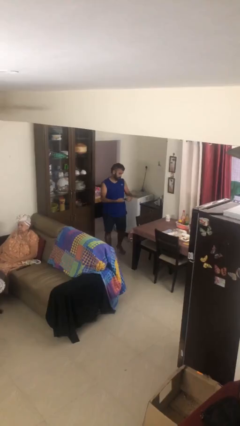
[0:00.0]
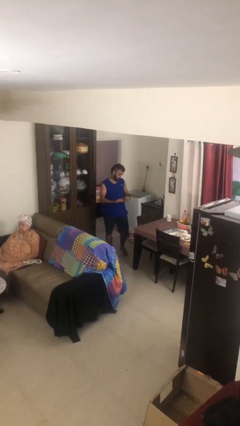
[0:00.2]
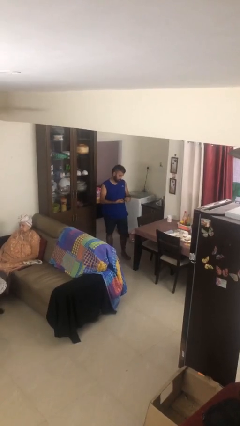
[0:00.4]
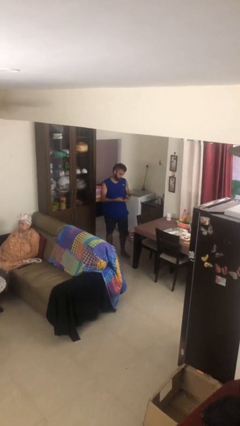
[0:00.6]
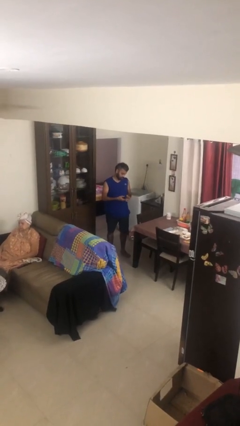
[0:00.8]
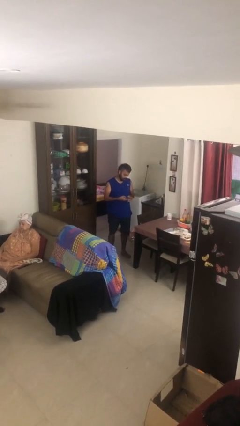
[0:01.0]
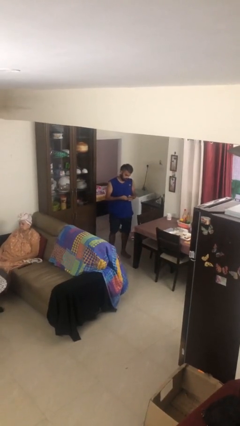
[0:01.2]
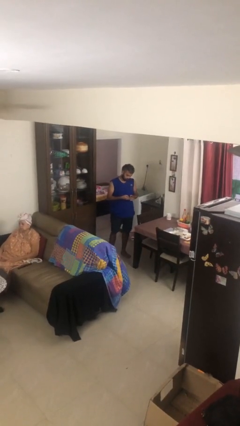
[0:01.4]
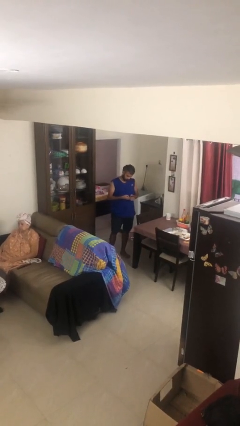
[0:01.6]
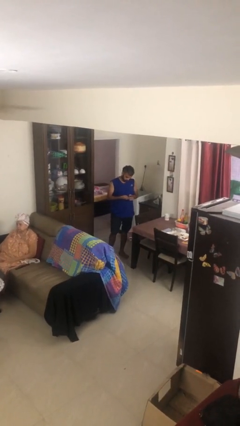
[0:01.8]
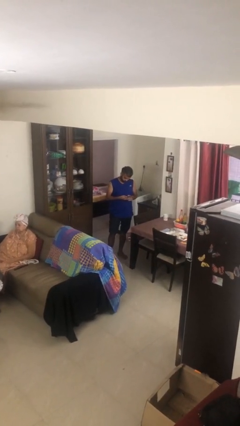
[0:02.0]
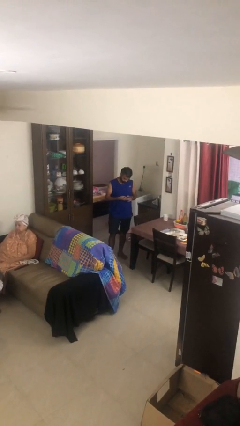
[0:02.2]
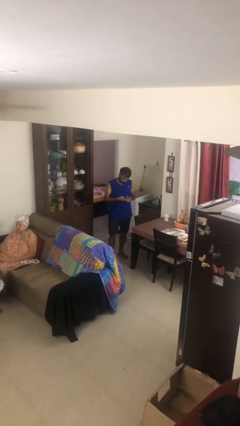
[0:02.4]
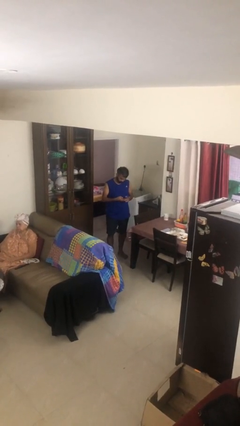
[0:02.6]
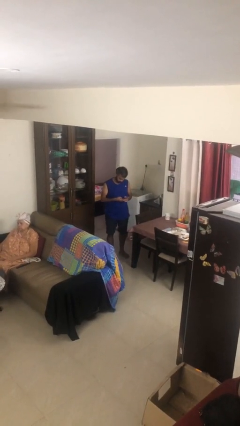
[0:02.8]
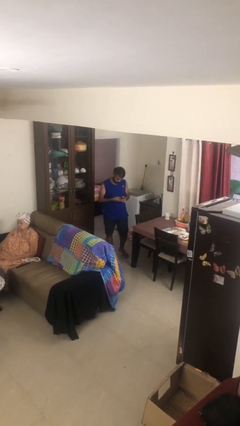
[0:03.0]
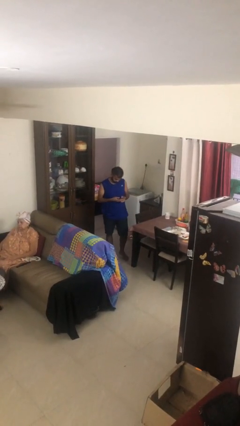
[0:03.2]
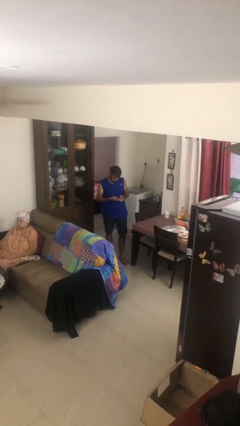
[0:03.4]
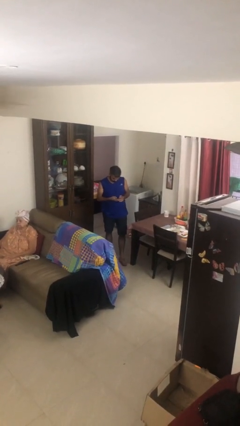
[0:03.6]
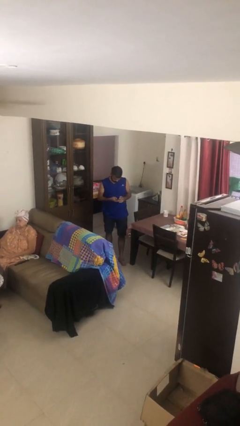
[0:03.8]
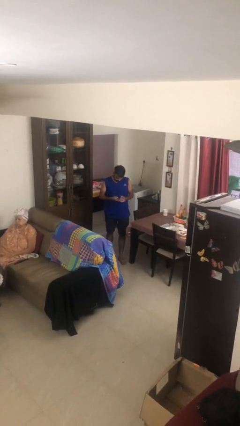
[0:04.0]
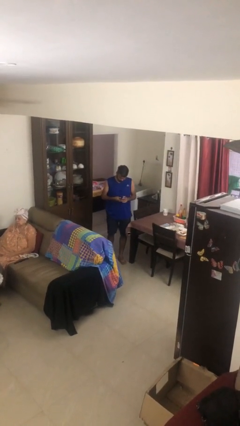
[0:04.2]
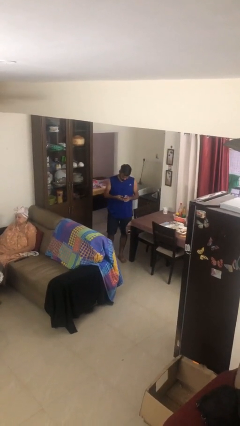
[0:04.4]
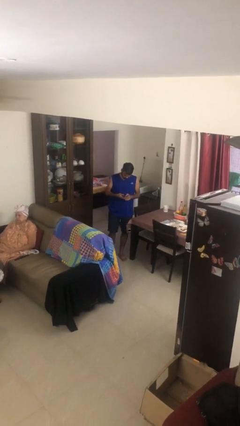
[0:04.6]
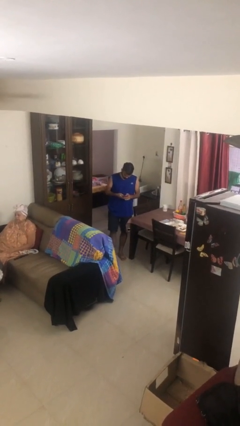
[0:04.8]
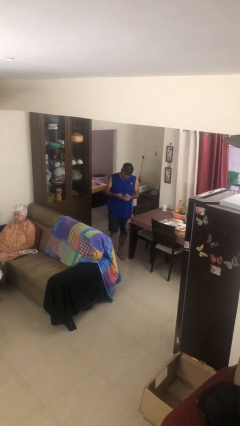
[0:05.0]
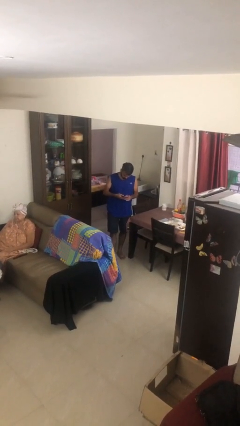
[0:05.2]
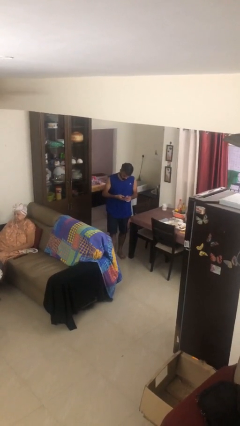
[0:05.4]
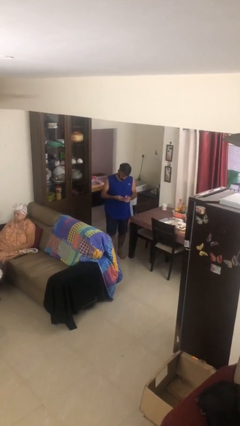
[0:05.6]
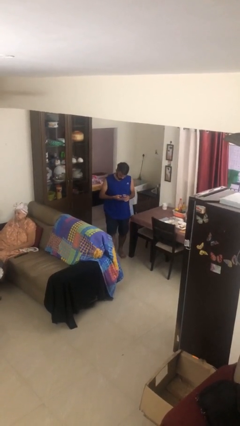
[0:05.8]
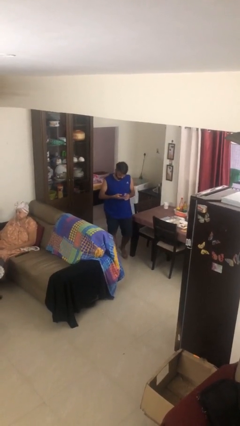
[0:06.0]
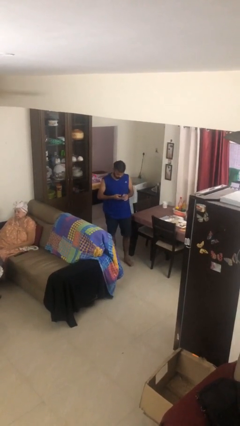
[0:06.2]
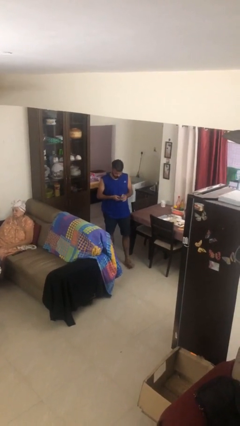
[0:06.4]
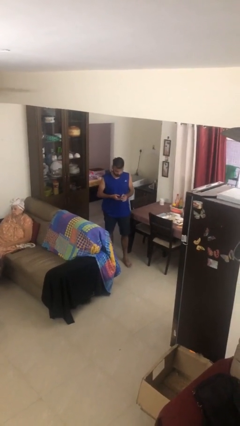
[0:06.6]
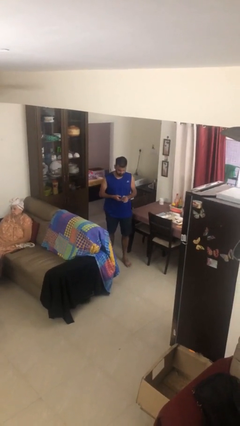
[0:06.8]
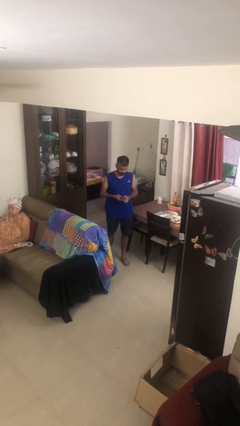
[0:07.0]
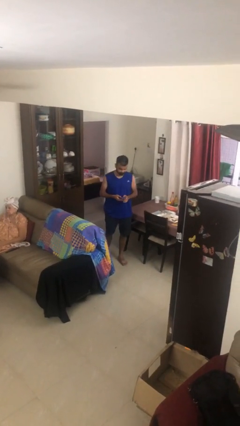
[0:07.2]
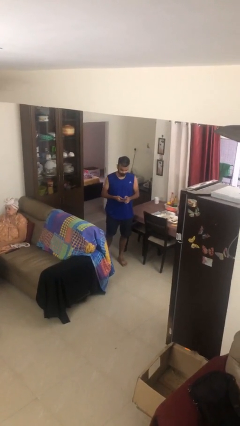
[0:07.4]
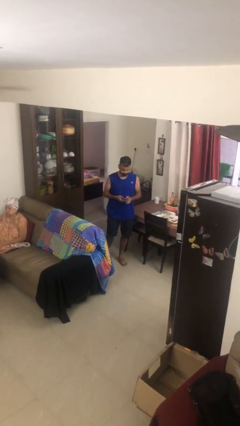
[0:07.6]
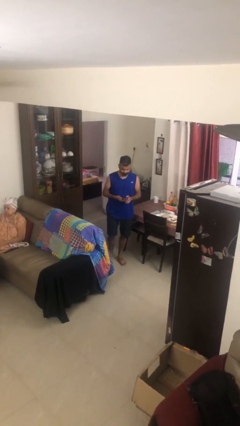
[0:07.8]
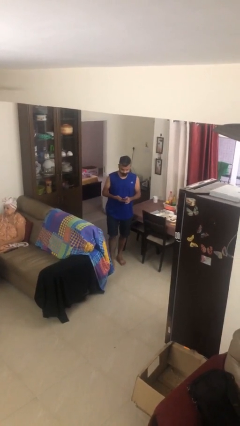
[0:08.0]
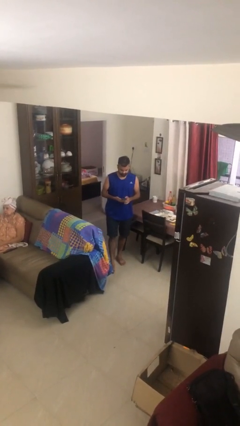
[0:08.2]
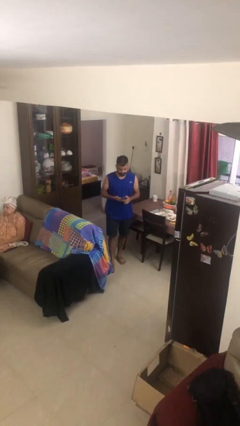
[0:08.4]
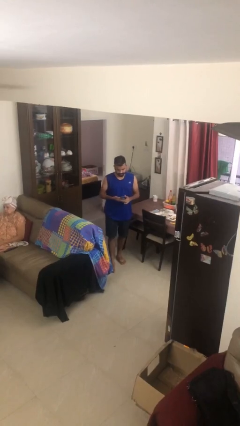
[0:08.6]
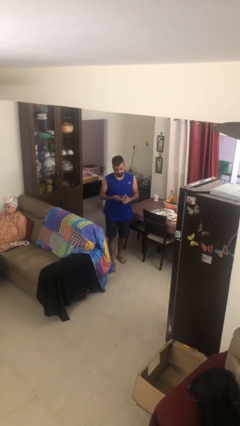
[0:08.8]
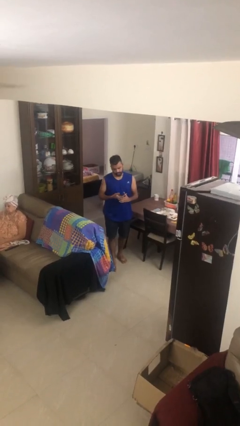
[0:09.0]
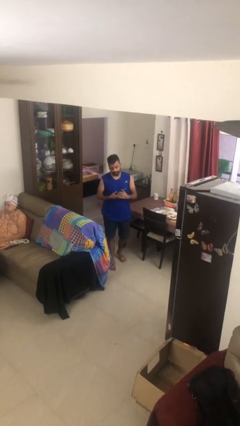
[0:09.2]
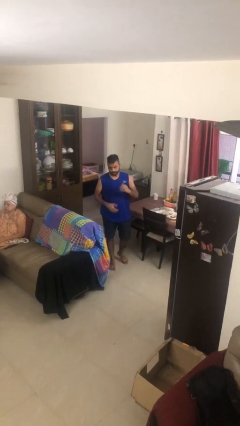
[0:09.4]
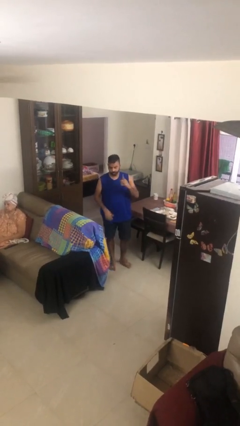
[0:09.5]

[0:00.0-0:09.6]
person texts on phone

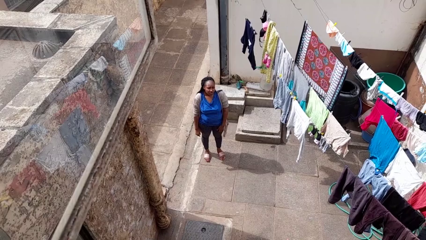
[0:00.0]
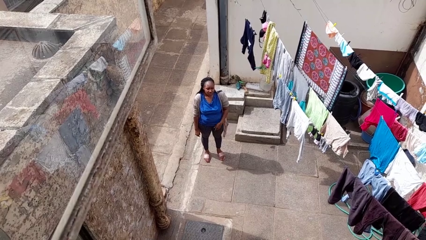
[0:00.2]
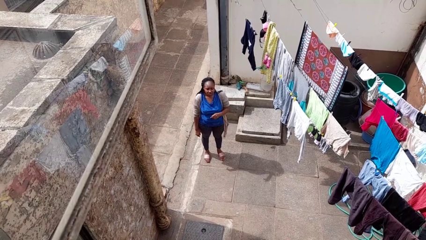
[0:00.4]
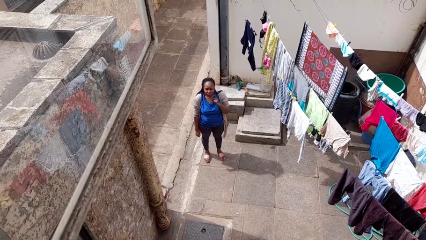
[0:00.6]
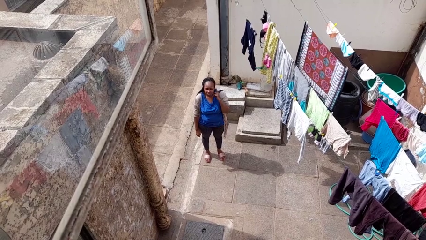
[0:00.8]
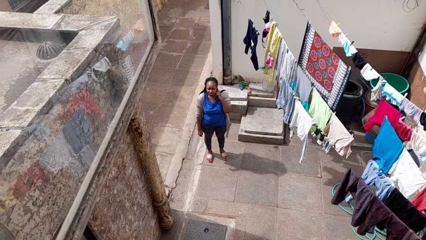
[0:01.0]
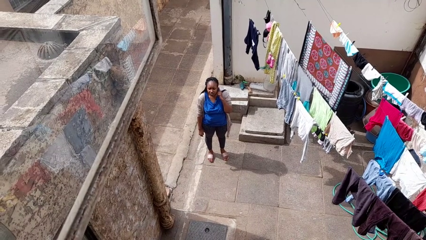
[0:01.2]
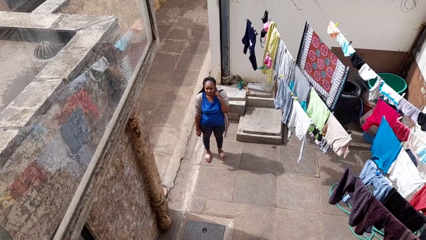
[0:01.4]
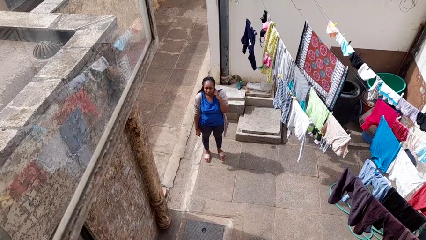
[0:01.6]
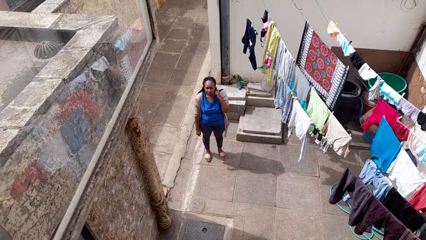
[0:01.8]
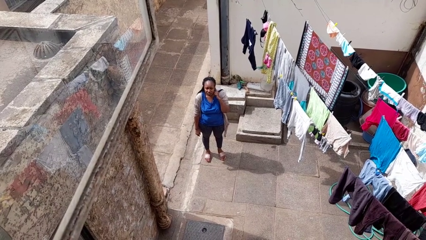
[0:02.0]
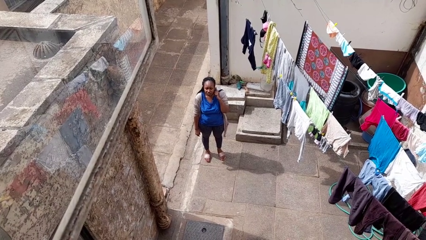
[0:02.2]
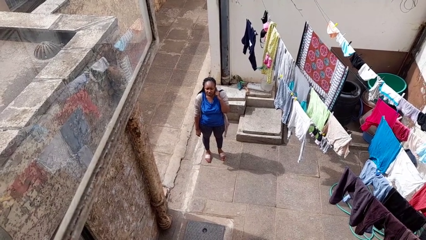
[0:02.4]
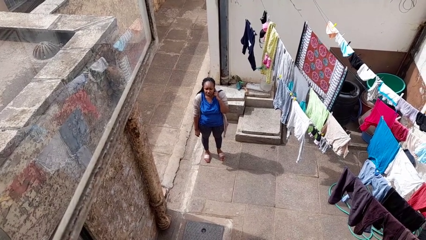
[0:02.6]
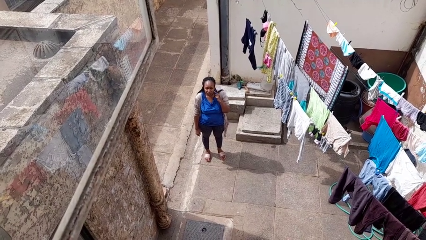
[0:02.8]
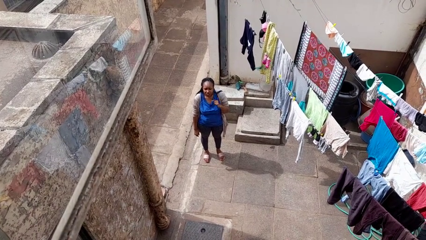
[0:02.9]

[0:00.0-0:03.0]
person gestures listen closely

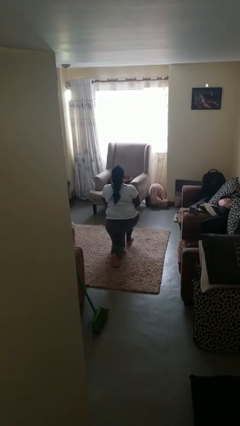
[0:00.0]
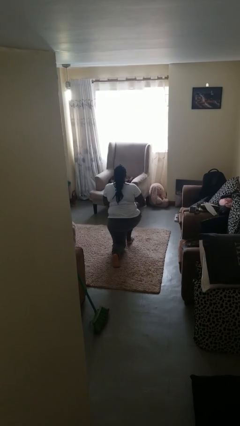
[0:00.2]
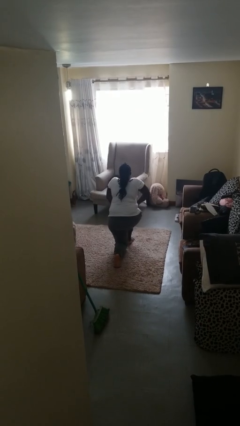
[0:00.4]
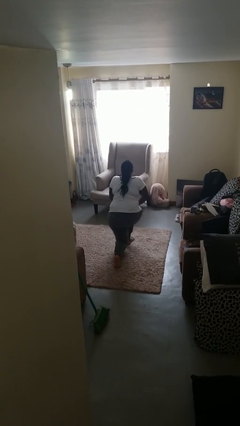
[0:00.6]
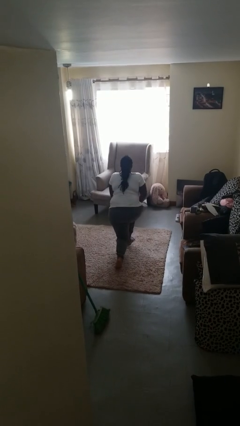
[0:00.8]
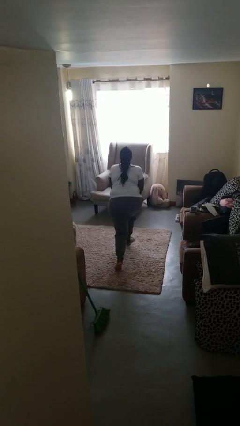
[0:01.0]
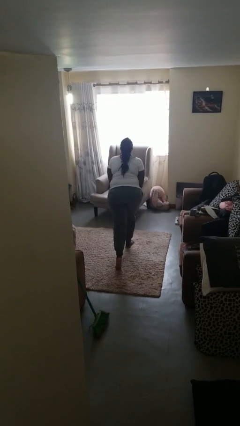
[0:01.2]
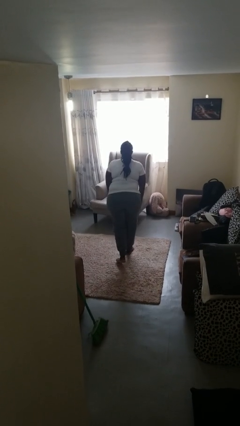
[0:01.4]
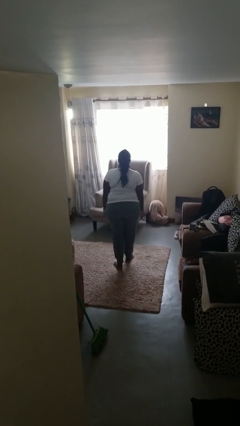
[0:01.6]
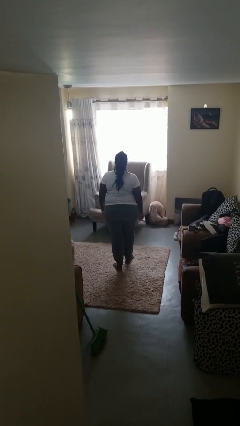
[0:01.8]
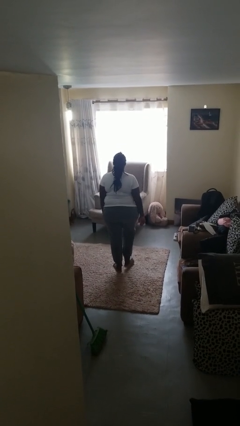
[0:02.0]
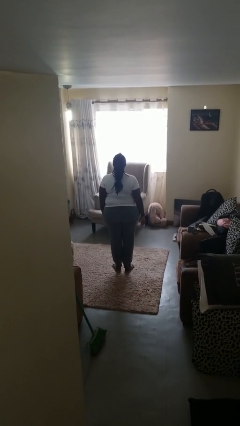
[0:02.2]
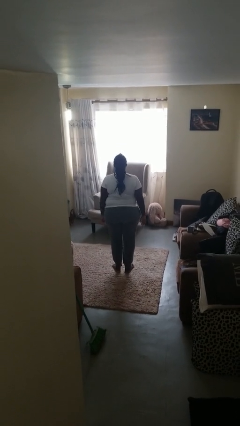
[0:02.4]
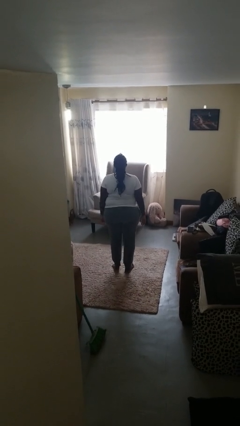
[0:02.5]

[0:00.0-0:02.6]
person stands up from floor

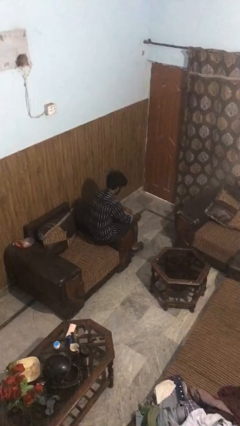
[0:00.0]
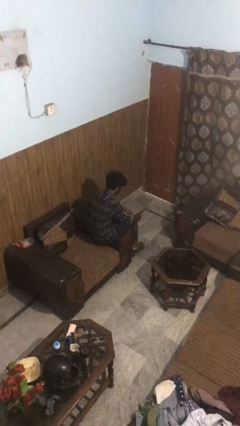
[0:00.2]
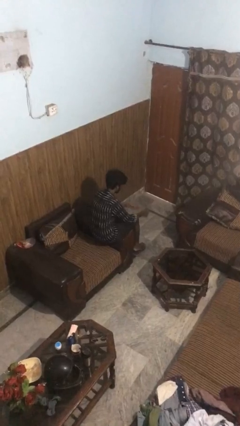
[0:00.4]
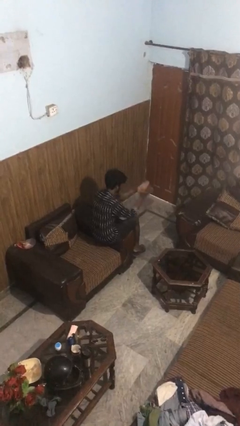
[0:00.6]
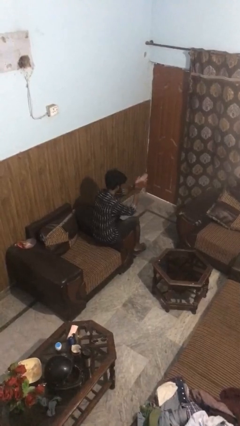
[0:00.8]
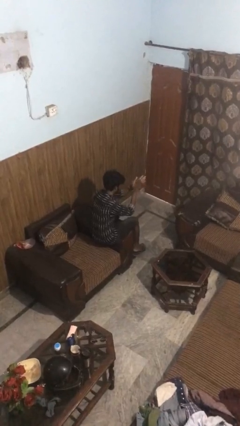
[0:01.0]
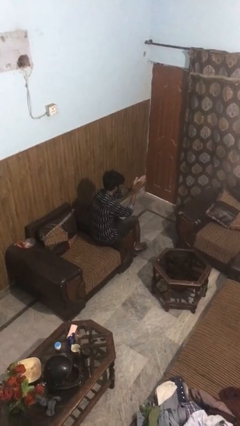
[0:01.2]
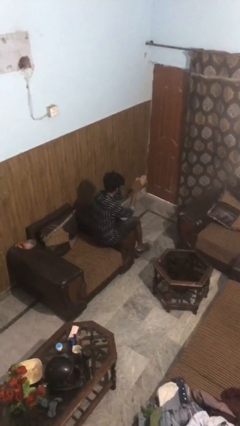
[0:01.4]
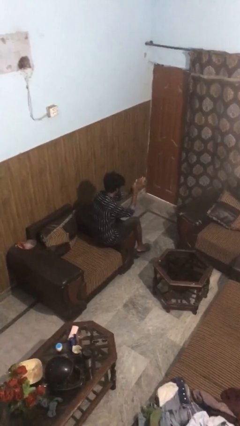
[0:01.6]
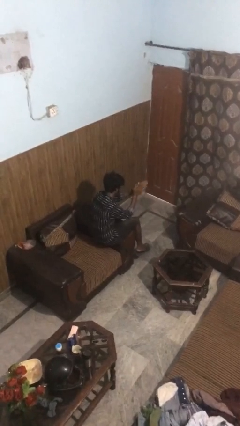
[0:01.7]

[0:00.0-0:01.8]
person claps hands

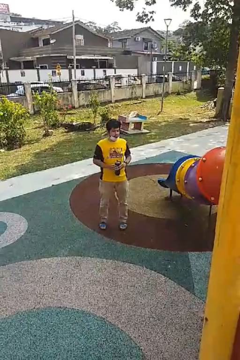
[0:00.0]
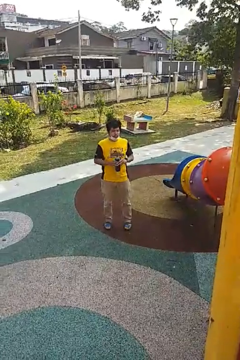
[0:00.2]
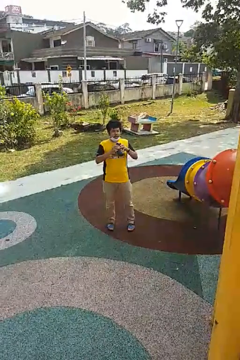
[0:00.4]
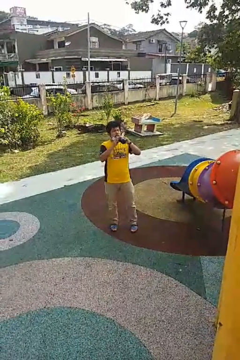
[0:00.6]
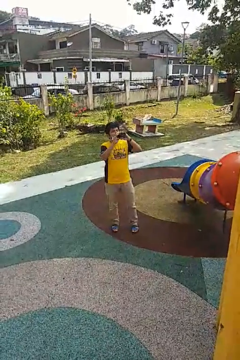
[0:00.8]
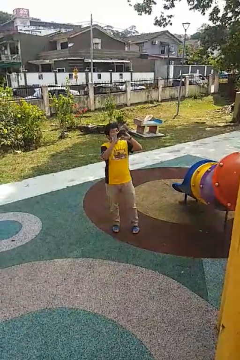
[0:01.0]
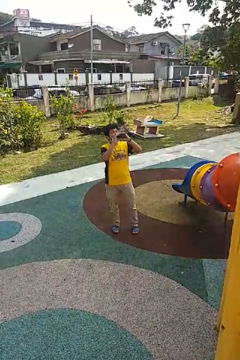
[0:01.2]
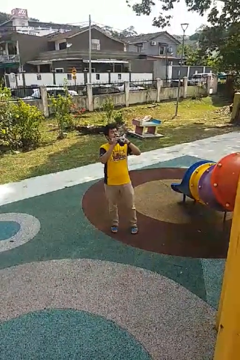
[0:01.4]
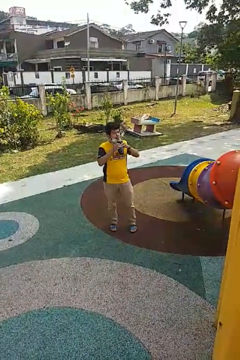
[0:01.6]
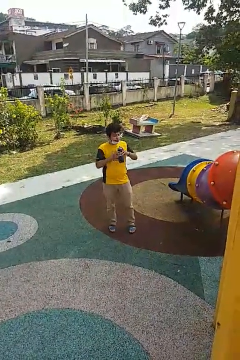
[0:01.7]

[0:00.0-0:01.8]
person drinks from bottle
